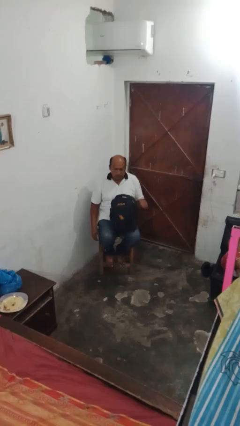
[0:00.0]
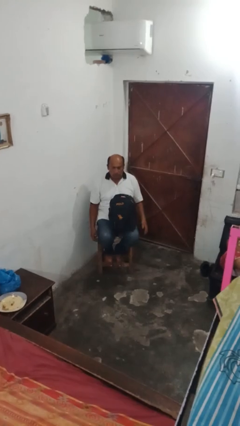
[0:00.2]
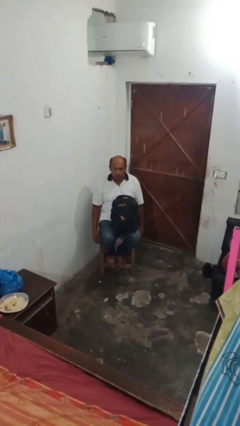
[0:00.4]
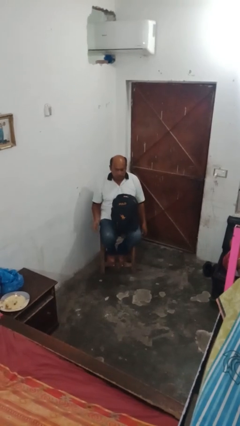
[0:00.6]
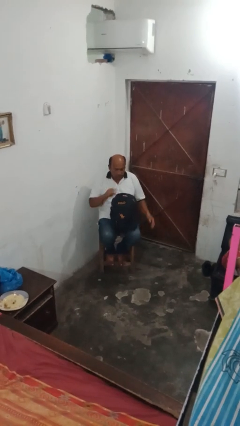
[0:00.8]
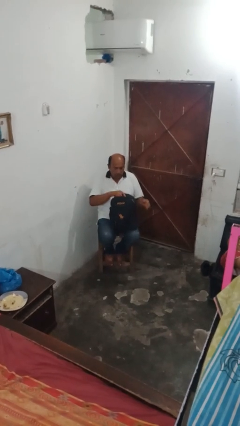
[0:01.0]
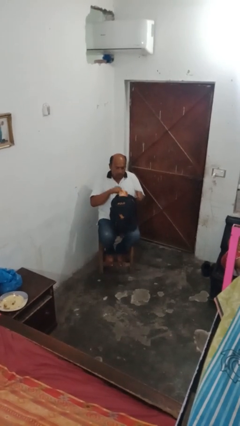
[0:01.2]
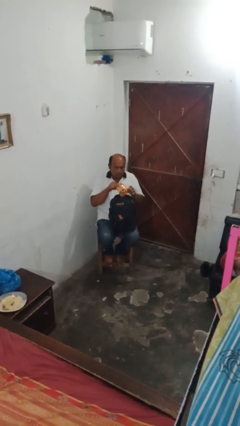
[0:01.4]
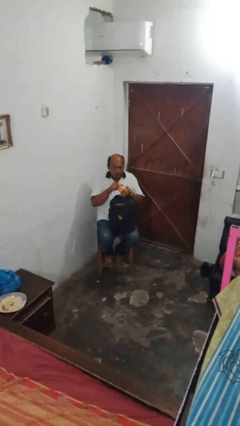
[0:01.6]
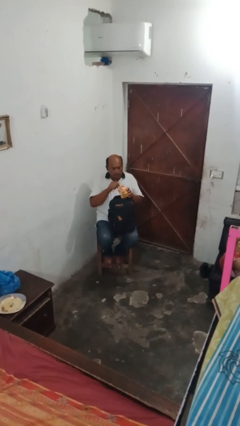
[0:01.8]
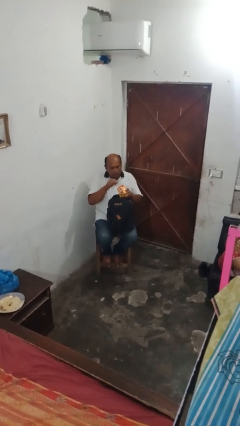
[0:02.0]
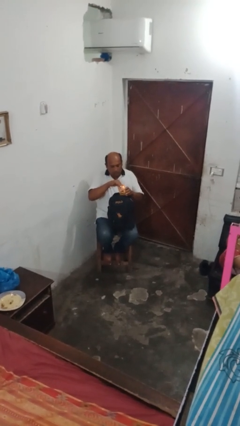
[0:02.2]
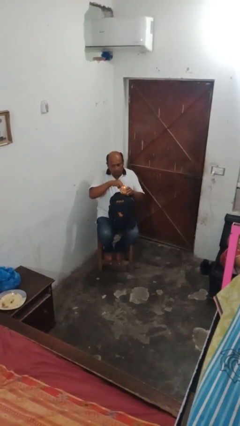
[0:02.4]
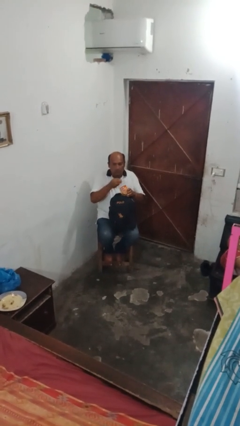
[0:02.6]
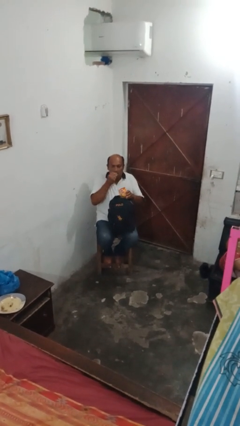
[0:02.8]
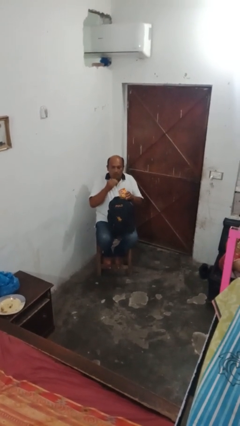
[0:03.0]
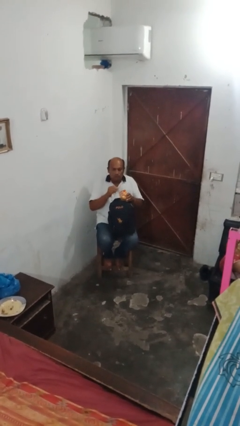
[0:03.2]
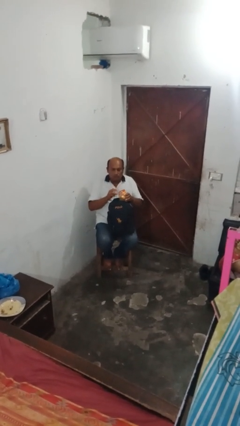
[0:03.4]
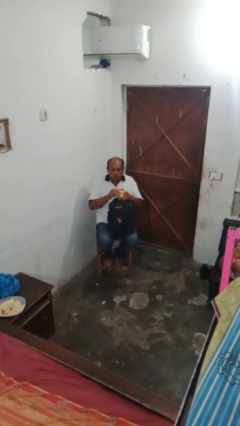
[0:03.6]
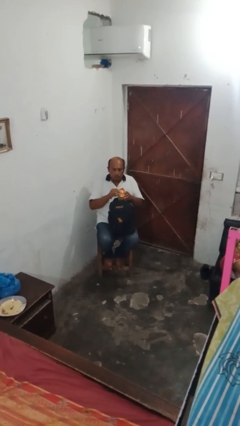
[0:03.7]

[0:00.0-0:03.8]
person eats snack from bag

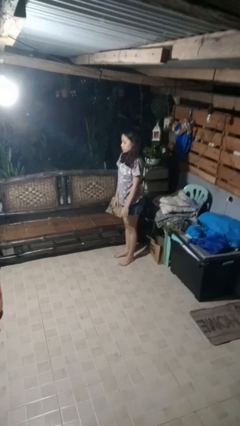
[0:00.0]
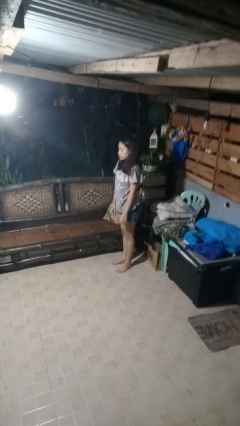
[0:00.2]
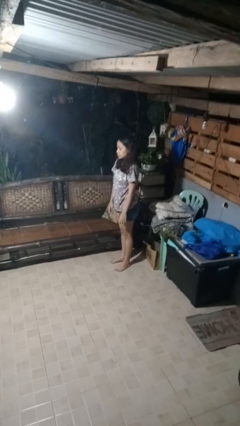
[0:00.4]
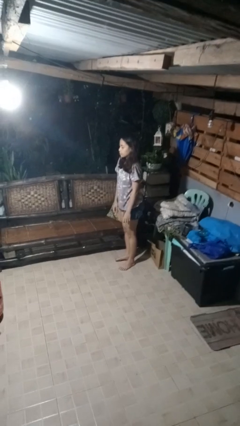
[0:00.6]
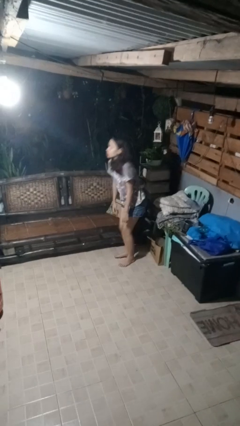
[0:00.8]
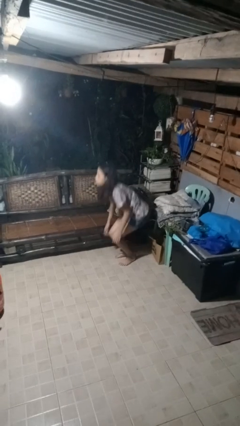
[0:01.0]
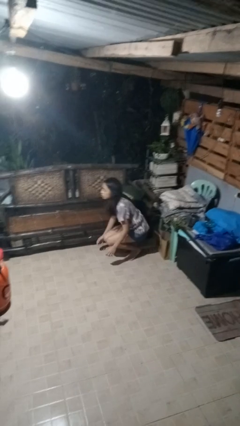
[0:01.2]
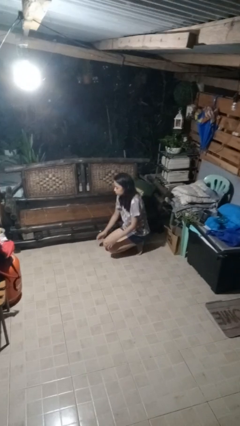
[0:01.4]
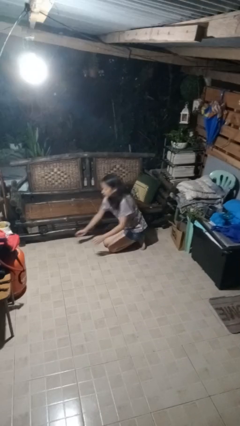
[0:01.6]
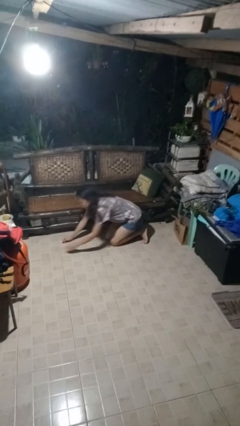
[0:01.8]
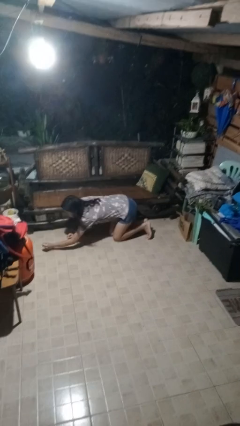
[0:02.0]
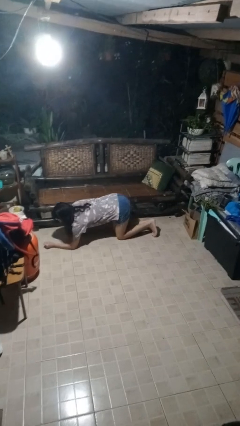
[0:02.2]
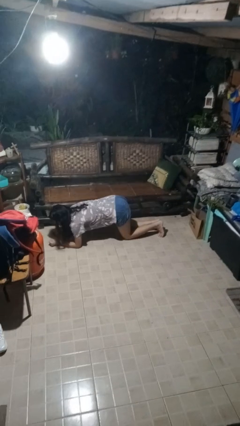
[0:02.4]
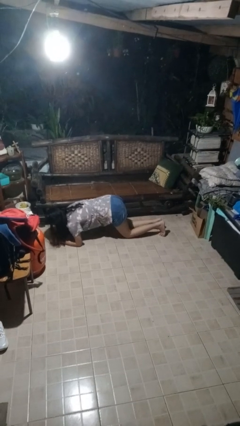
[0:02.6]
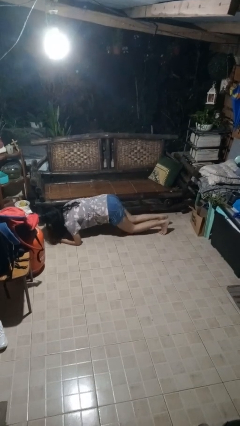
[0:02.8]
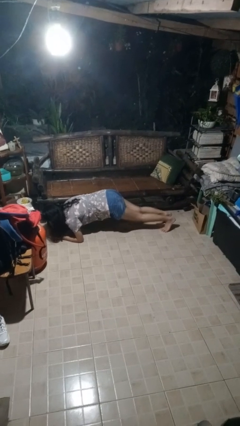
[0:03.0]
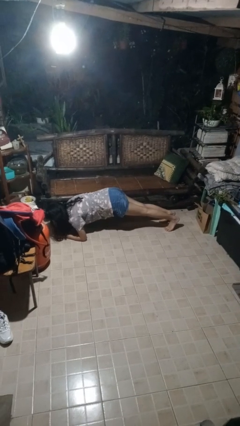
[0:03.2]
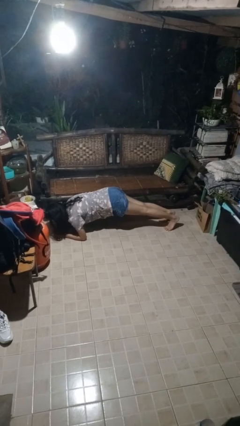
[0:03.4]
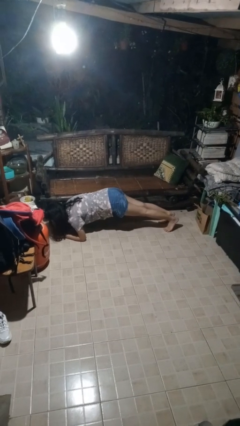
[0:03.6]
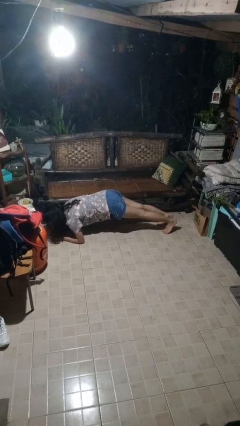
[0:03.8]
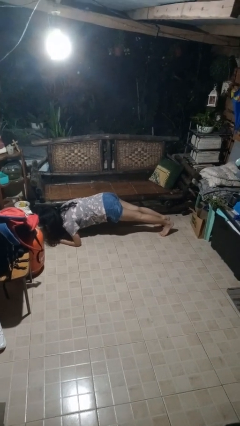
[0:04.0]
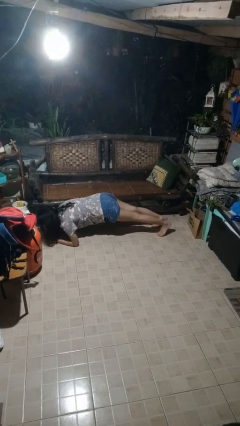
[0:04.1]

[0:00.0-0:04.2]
person exercises with plank

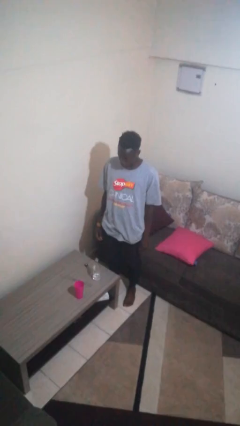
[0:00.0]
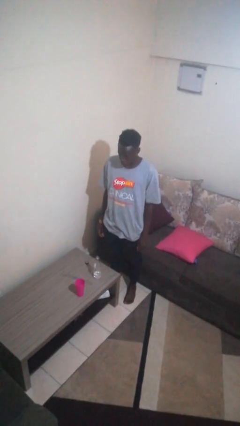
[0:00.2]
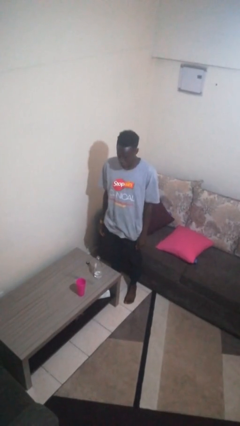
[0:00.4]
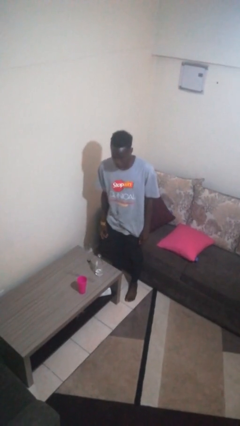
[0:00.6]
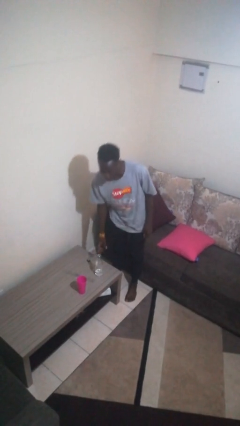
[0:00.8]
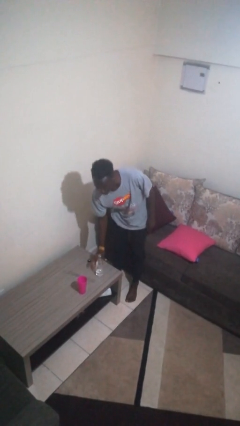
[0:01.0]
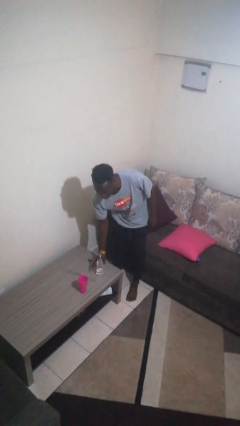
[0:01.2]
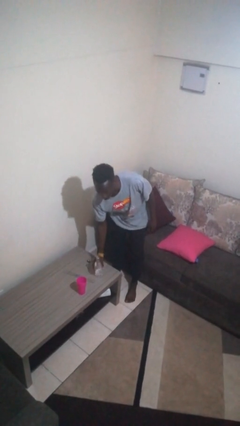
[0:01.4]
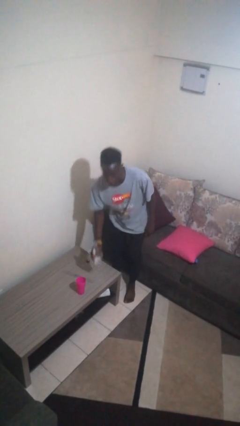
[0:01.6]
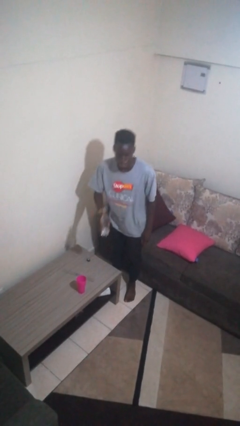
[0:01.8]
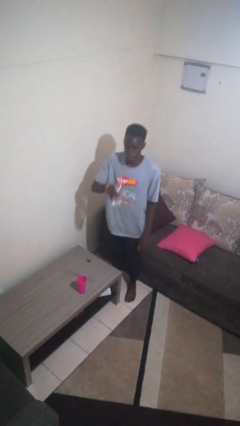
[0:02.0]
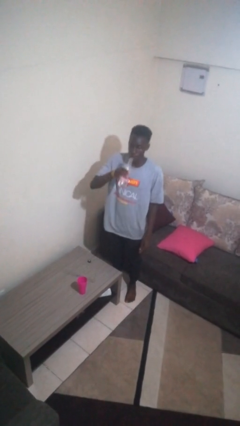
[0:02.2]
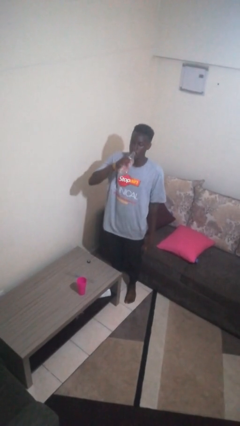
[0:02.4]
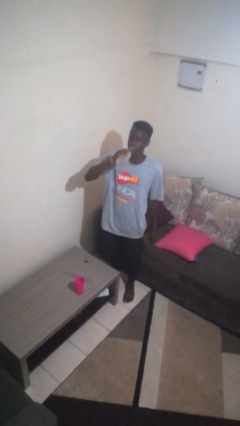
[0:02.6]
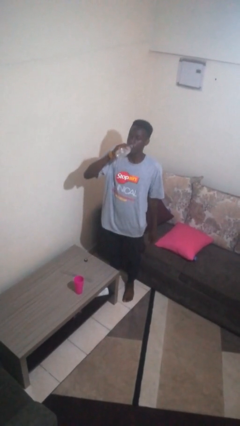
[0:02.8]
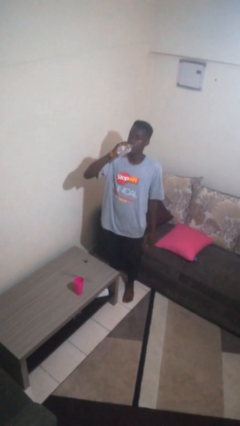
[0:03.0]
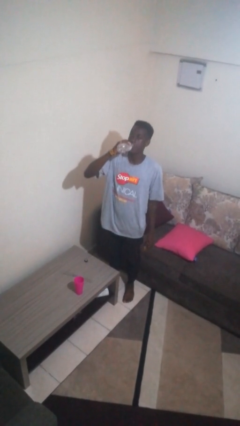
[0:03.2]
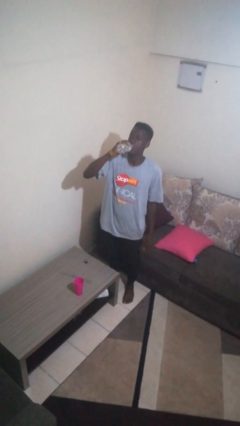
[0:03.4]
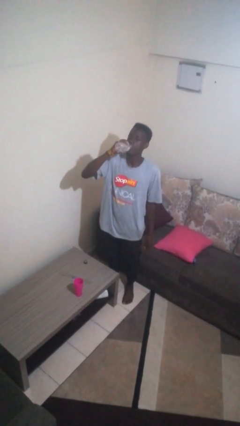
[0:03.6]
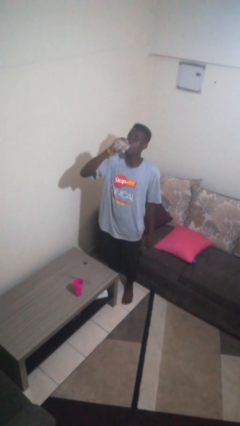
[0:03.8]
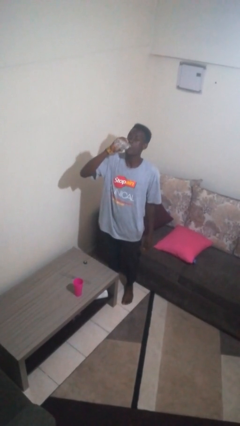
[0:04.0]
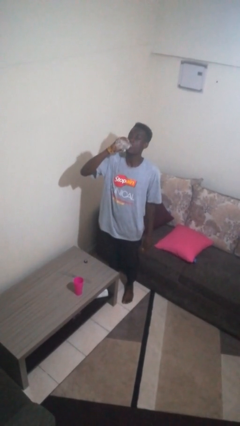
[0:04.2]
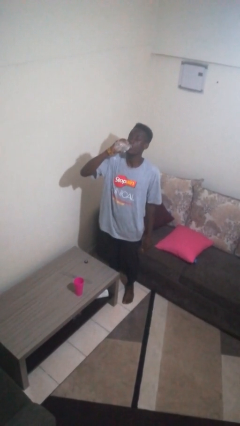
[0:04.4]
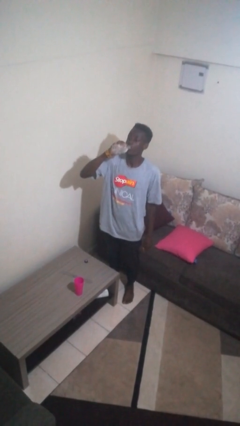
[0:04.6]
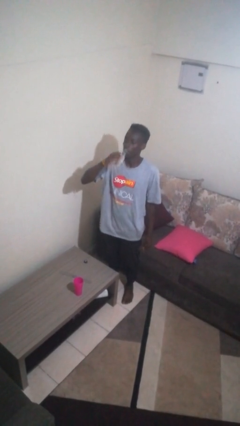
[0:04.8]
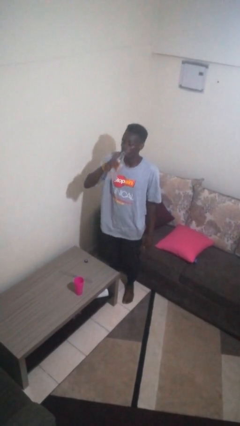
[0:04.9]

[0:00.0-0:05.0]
person drinks from bottle

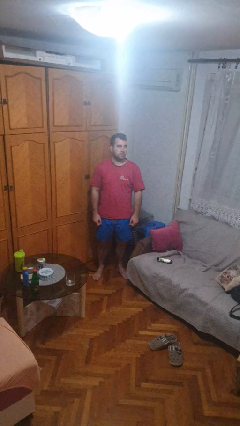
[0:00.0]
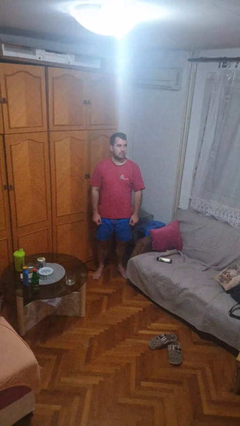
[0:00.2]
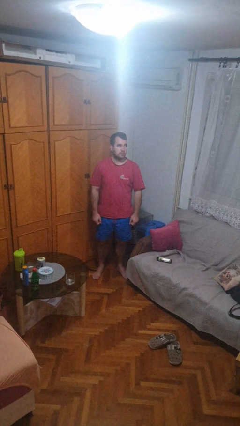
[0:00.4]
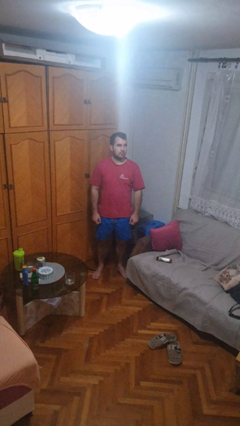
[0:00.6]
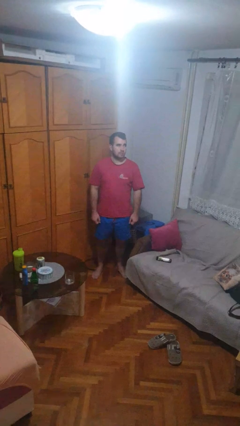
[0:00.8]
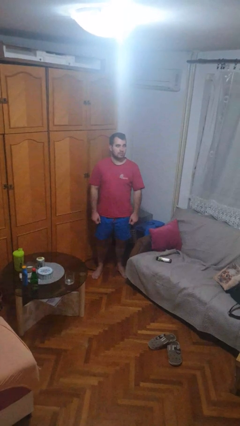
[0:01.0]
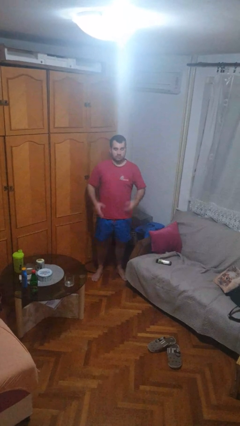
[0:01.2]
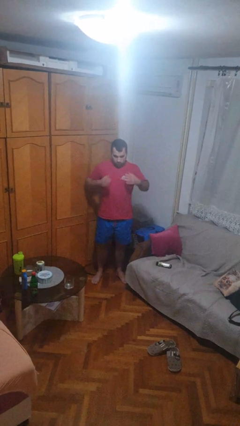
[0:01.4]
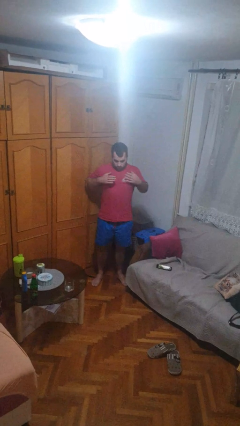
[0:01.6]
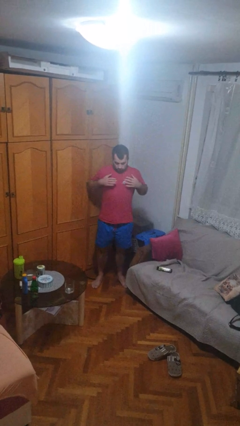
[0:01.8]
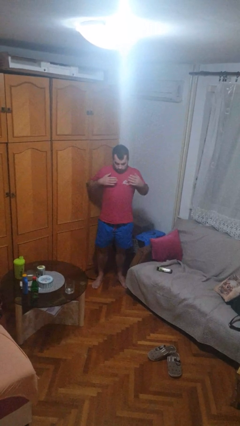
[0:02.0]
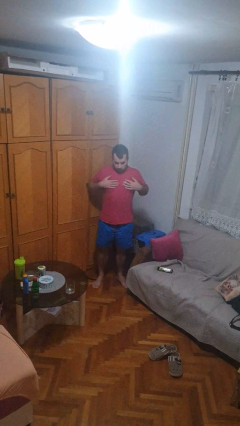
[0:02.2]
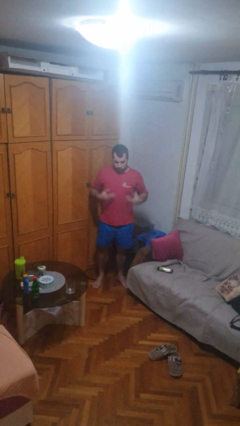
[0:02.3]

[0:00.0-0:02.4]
person drums on chest

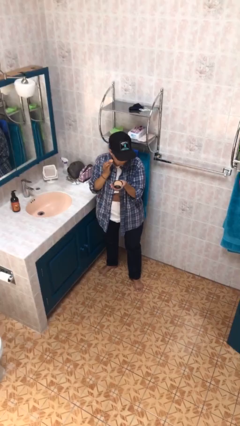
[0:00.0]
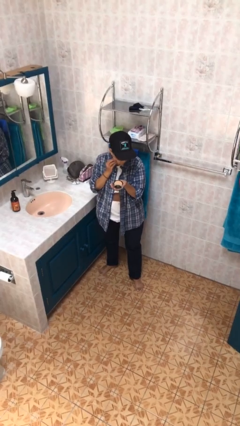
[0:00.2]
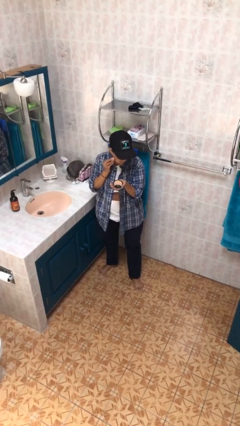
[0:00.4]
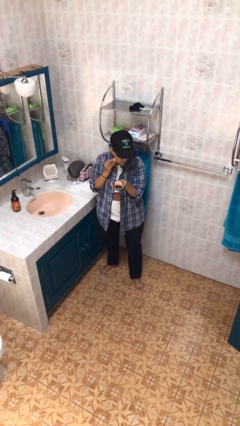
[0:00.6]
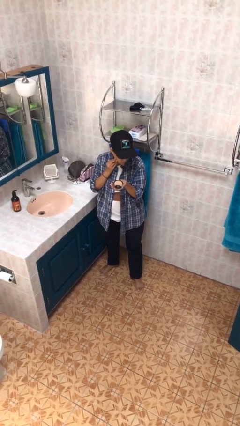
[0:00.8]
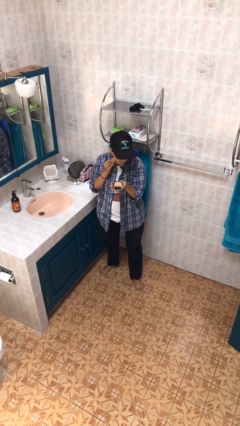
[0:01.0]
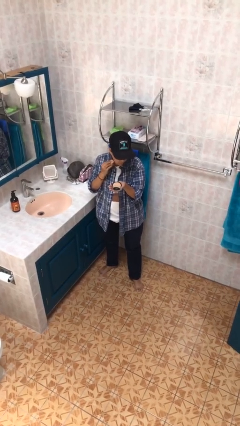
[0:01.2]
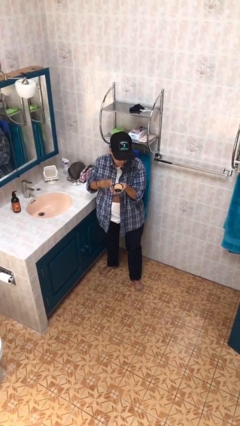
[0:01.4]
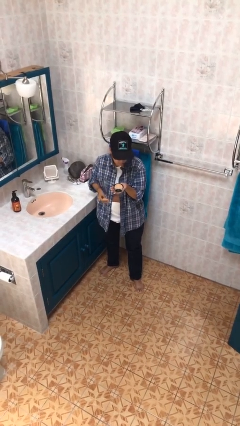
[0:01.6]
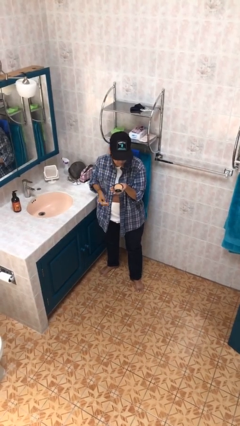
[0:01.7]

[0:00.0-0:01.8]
person applies foundation makeup

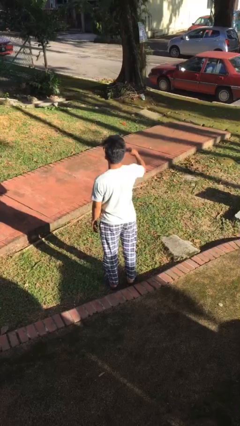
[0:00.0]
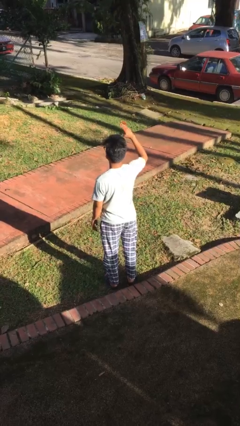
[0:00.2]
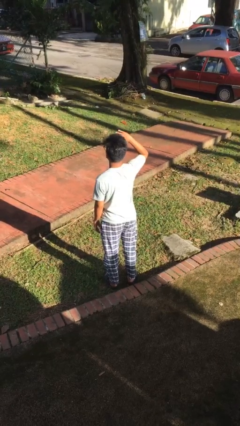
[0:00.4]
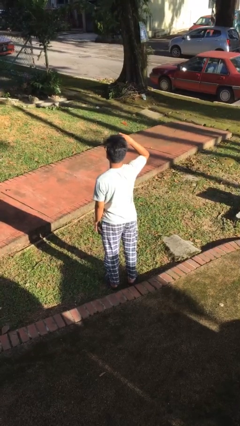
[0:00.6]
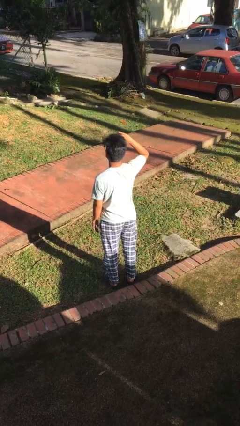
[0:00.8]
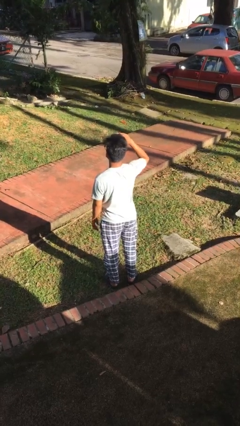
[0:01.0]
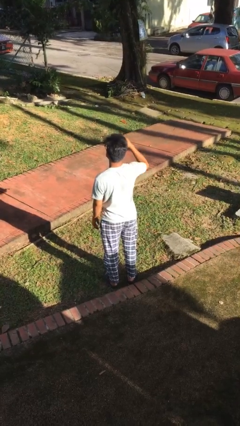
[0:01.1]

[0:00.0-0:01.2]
person salutes
